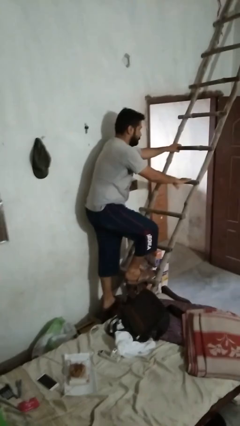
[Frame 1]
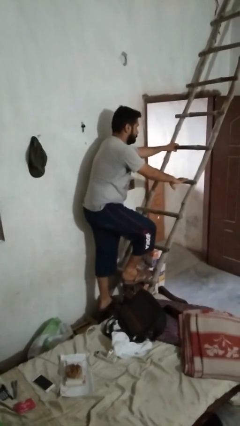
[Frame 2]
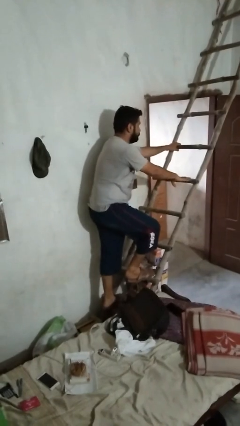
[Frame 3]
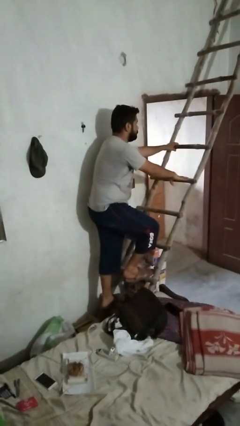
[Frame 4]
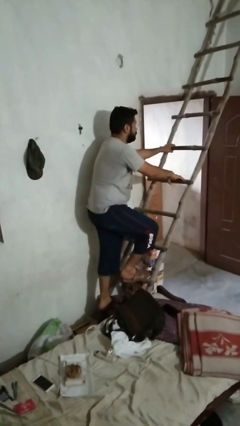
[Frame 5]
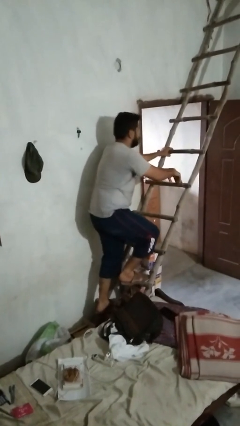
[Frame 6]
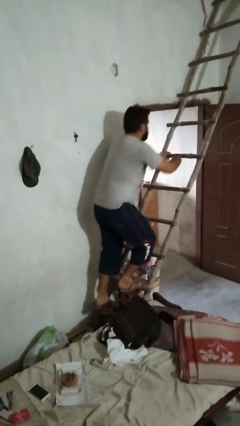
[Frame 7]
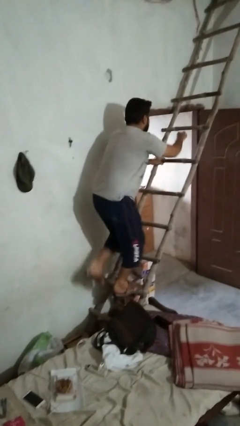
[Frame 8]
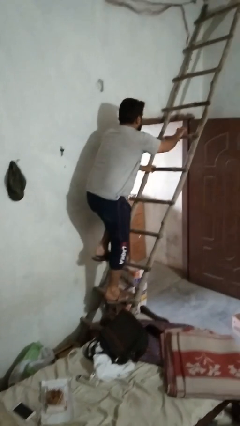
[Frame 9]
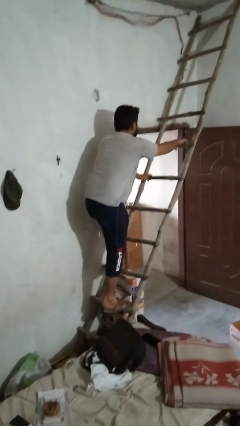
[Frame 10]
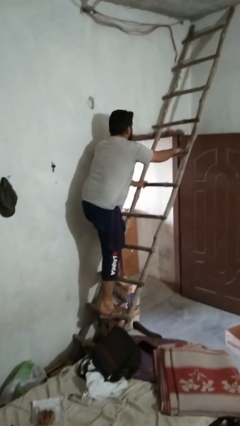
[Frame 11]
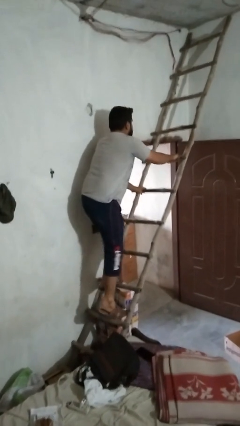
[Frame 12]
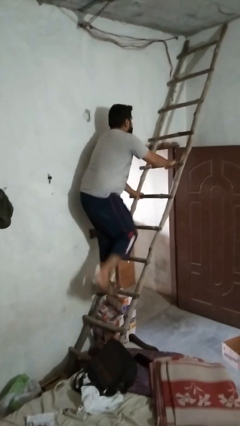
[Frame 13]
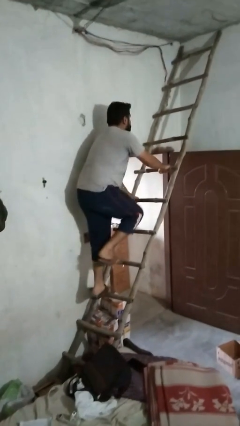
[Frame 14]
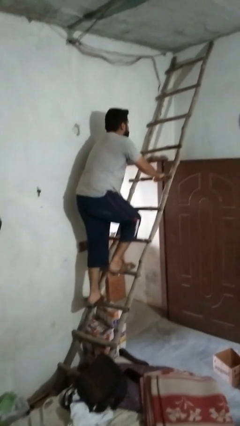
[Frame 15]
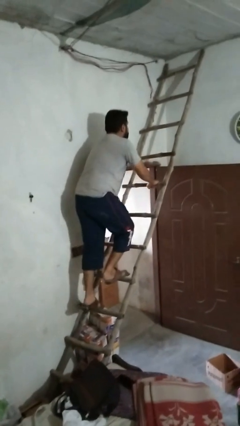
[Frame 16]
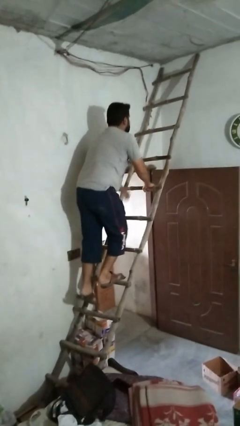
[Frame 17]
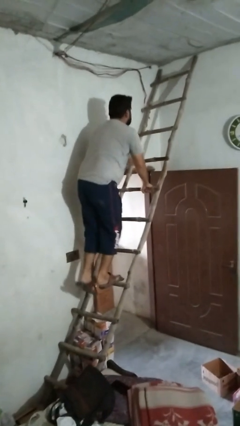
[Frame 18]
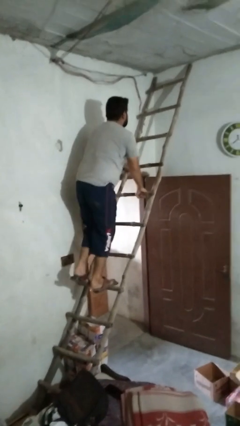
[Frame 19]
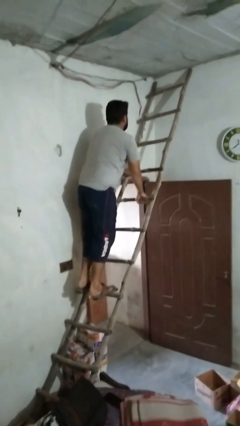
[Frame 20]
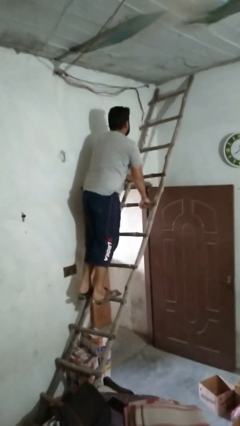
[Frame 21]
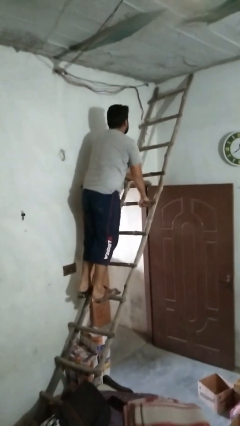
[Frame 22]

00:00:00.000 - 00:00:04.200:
person climbs up ladder

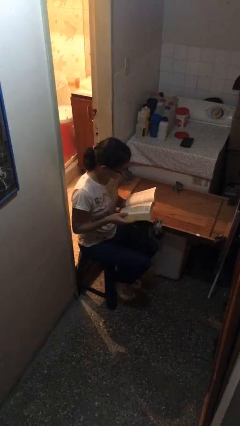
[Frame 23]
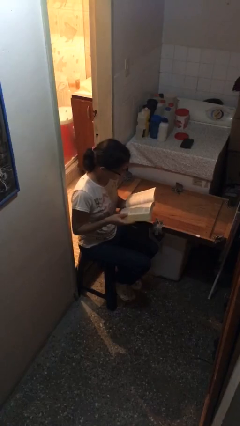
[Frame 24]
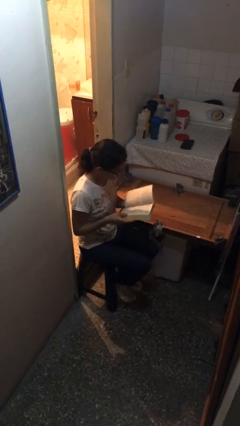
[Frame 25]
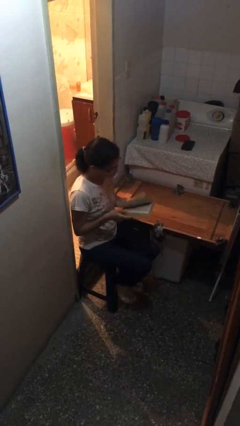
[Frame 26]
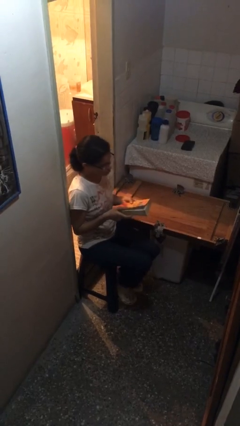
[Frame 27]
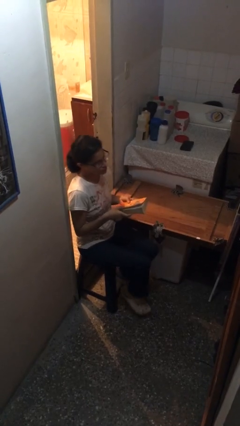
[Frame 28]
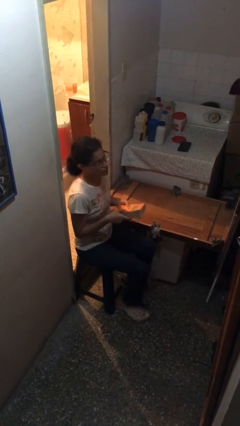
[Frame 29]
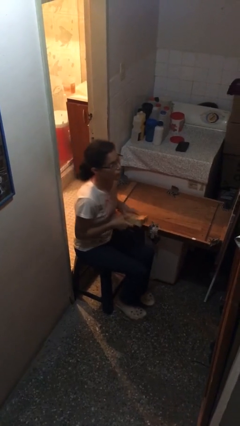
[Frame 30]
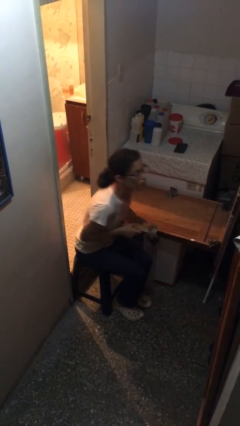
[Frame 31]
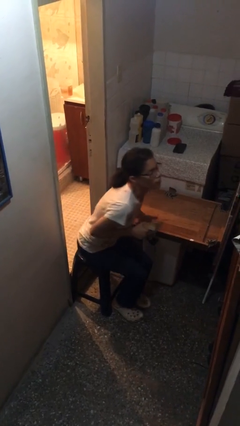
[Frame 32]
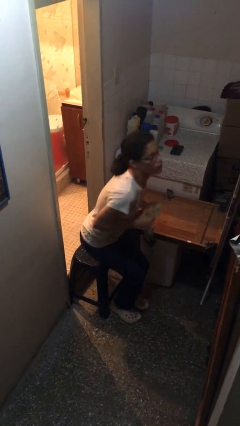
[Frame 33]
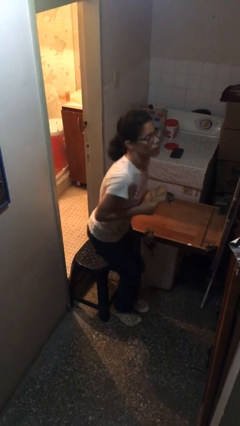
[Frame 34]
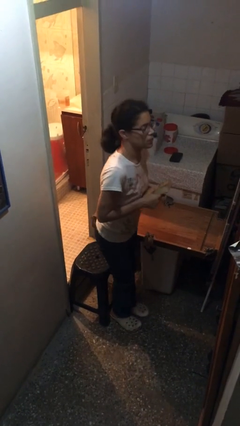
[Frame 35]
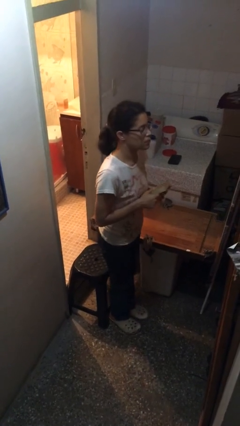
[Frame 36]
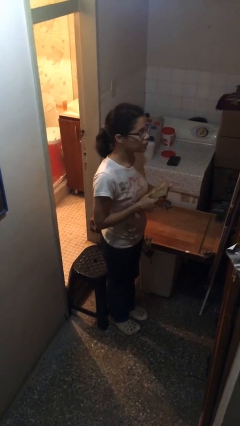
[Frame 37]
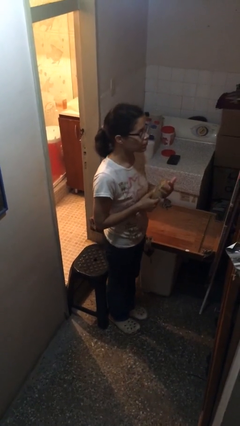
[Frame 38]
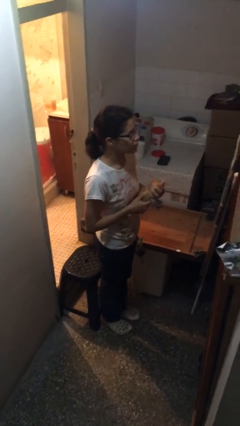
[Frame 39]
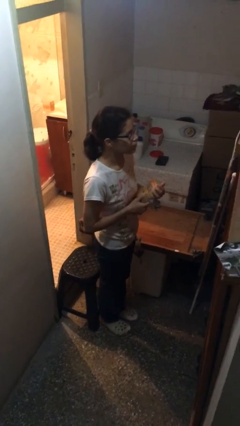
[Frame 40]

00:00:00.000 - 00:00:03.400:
person stands up

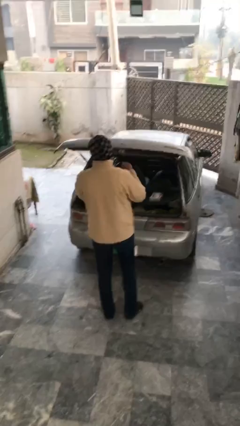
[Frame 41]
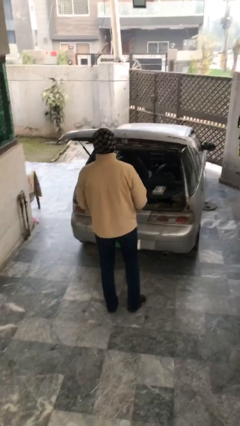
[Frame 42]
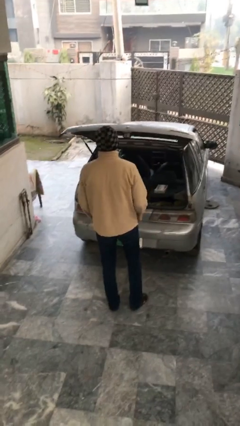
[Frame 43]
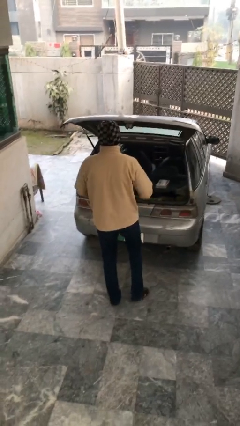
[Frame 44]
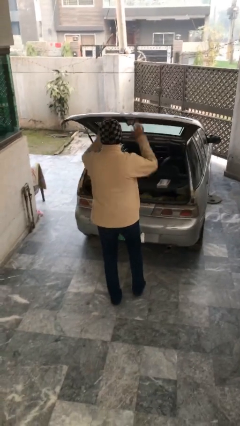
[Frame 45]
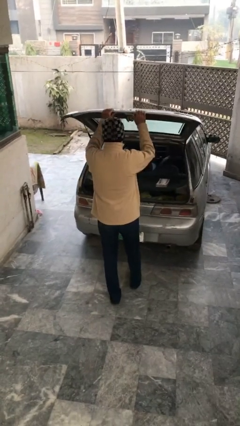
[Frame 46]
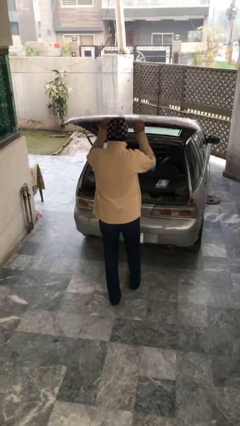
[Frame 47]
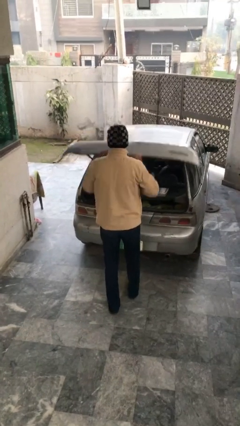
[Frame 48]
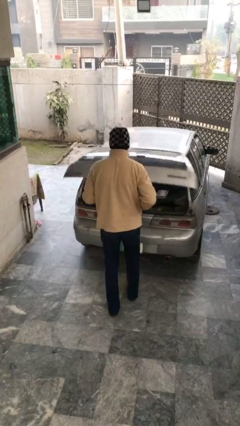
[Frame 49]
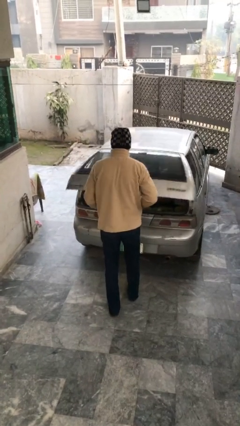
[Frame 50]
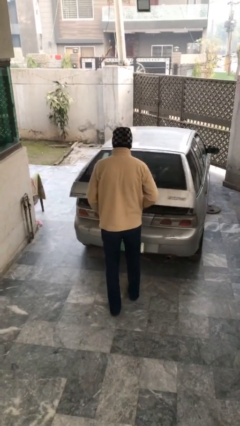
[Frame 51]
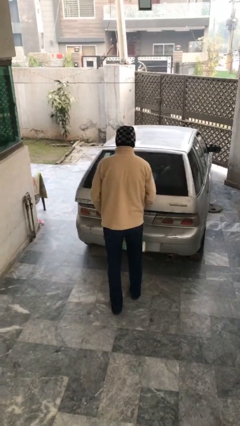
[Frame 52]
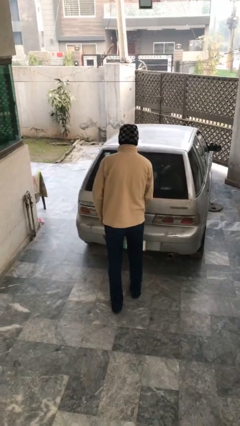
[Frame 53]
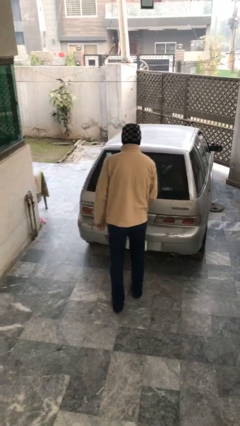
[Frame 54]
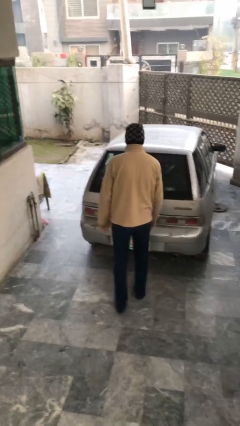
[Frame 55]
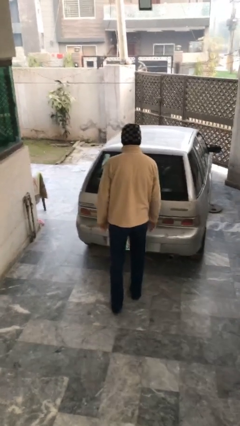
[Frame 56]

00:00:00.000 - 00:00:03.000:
person closes car trunk

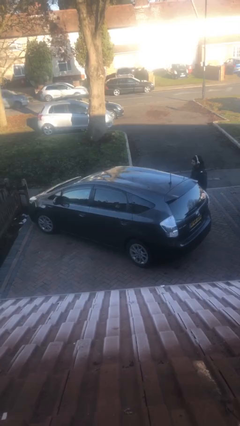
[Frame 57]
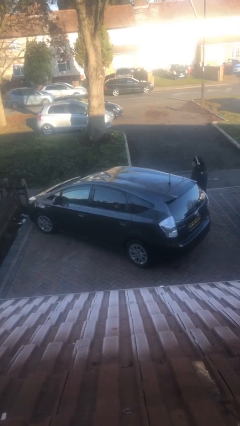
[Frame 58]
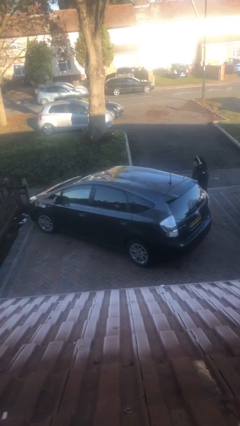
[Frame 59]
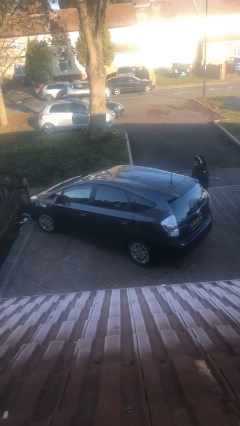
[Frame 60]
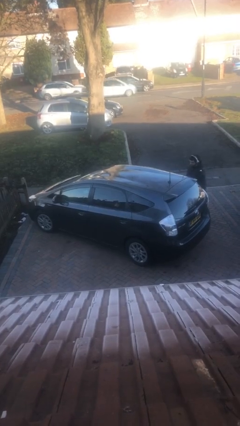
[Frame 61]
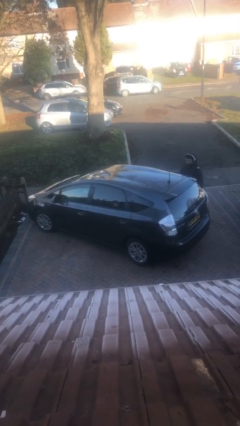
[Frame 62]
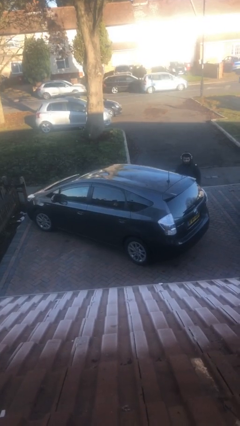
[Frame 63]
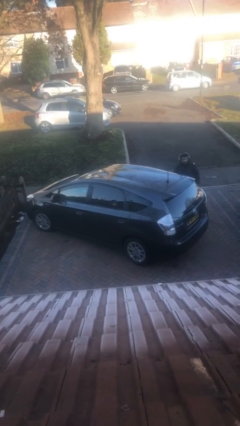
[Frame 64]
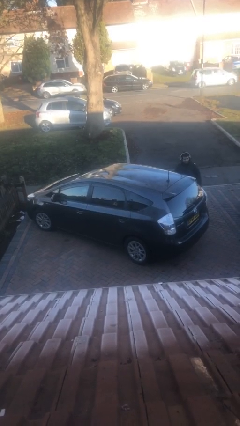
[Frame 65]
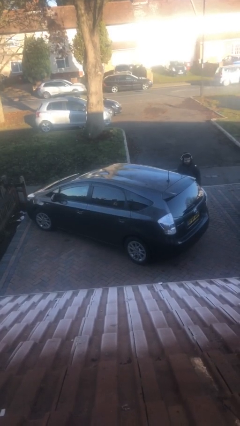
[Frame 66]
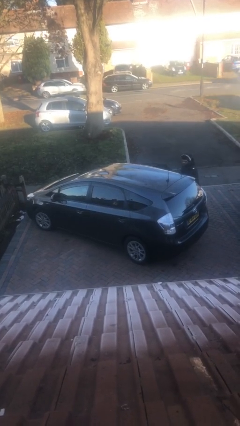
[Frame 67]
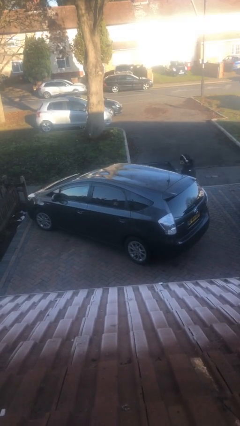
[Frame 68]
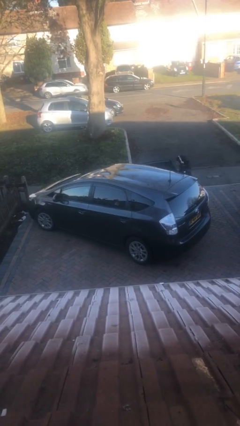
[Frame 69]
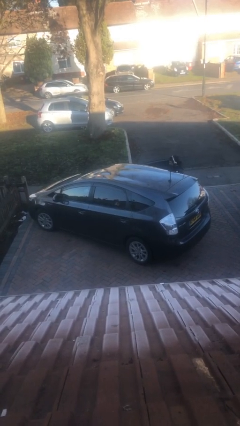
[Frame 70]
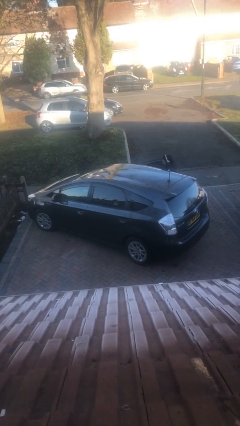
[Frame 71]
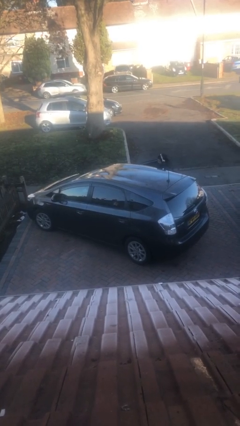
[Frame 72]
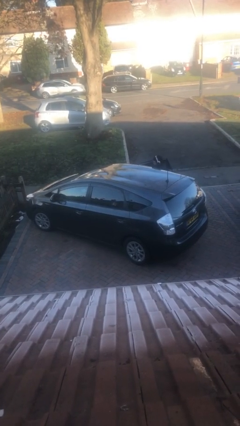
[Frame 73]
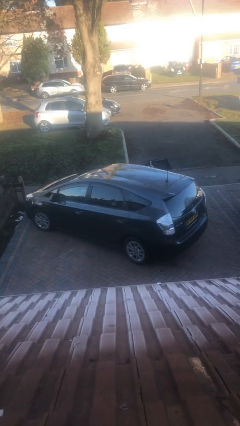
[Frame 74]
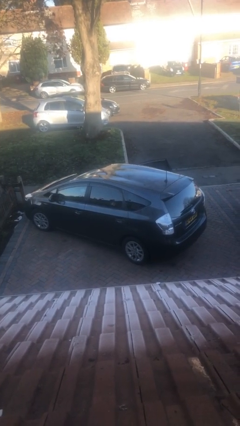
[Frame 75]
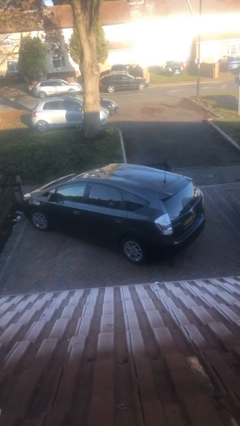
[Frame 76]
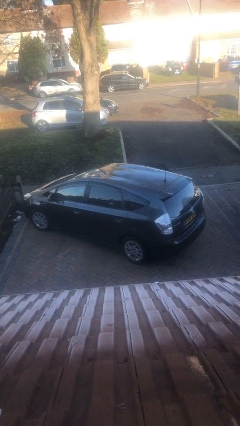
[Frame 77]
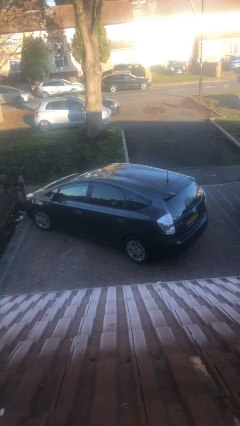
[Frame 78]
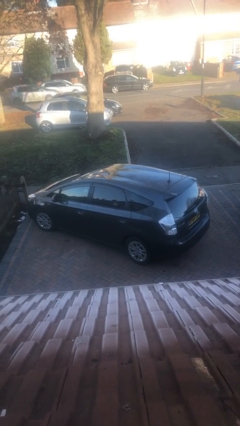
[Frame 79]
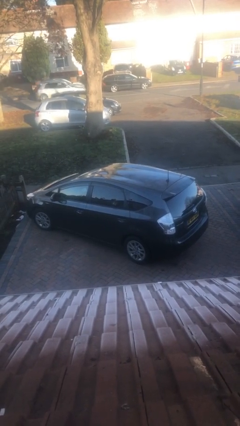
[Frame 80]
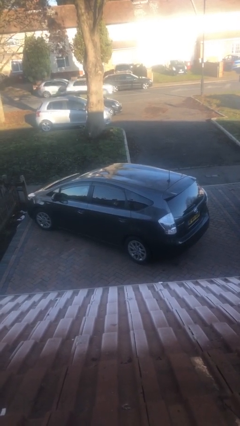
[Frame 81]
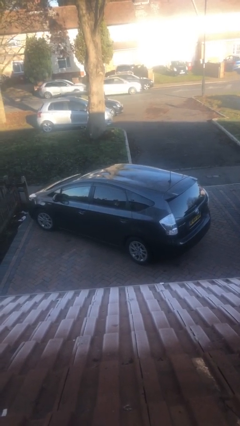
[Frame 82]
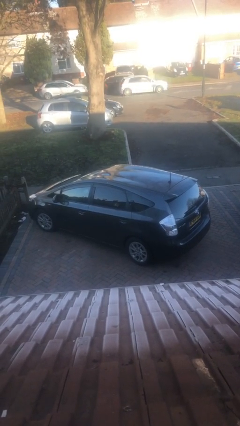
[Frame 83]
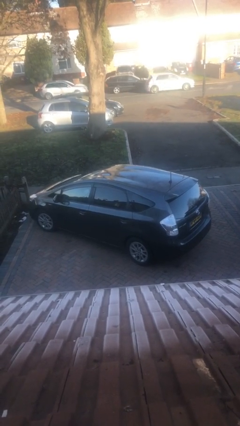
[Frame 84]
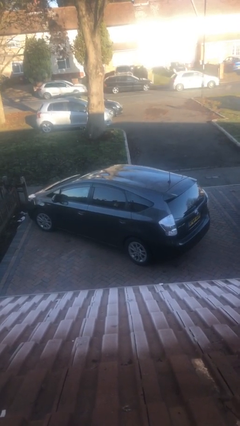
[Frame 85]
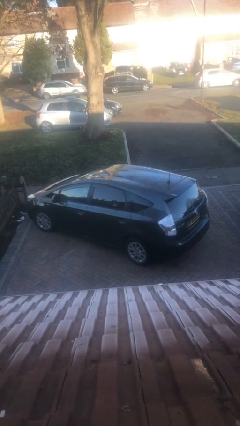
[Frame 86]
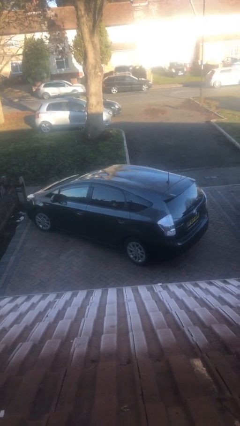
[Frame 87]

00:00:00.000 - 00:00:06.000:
car picks up person

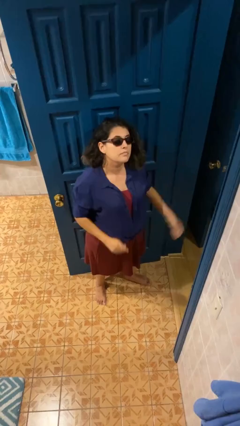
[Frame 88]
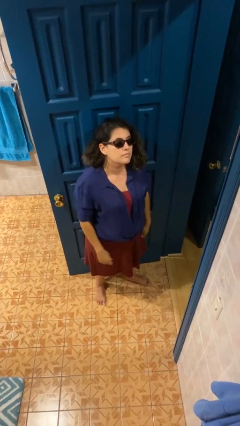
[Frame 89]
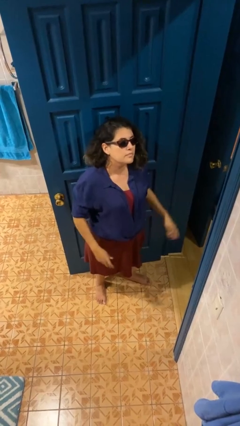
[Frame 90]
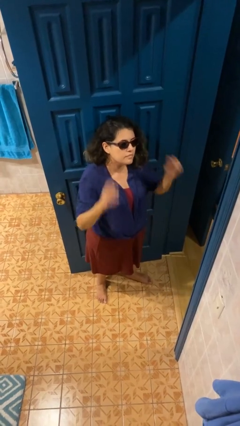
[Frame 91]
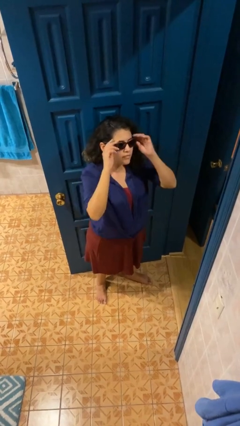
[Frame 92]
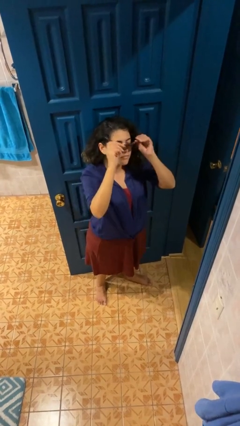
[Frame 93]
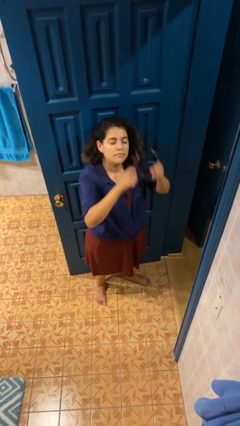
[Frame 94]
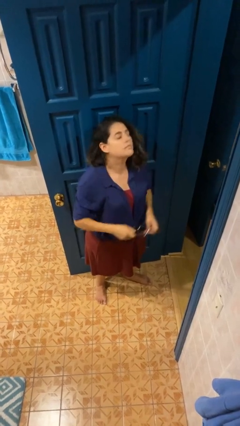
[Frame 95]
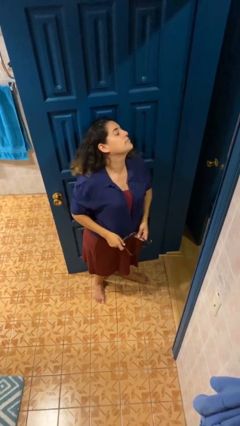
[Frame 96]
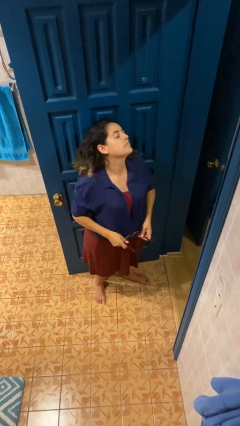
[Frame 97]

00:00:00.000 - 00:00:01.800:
person takes off sunglasses
